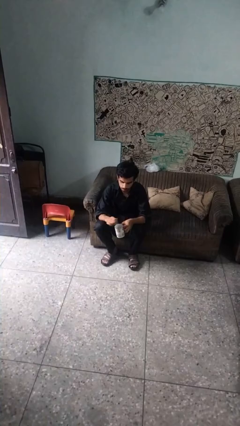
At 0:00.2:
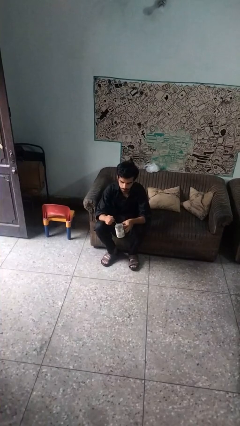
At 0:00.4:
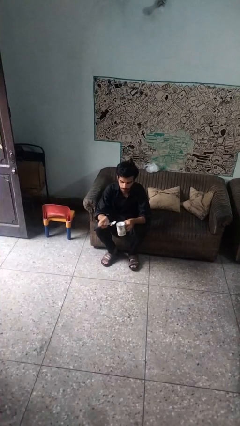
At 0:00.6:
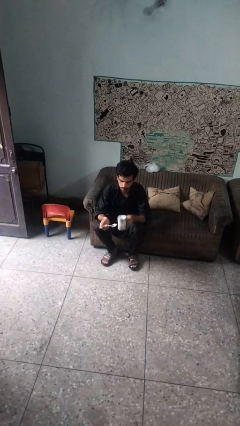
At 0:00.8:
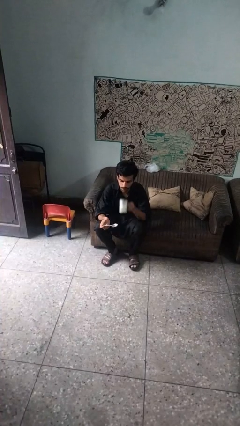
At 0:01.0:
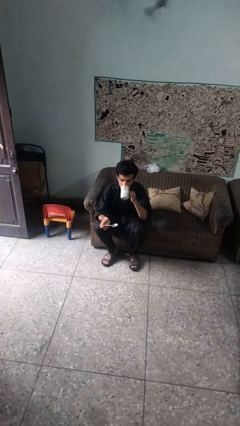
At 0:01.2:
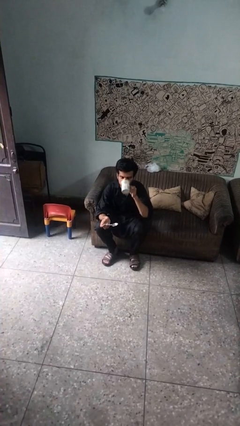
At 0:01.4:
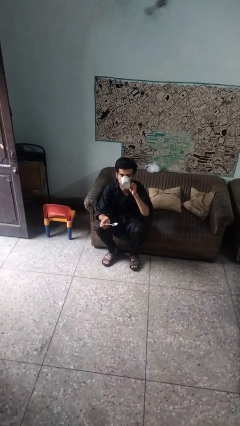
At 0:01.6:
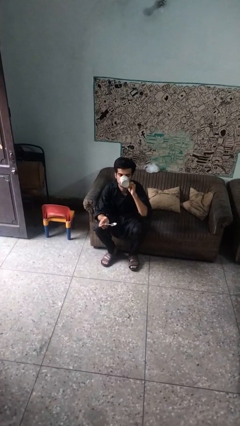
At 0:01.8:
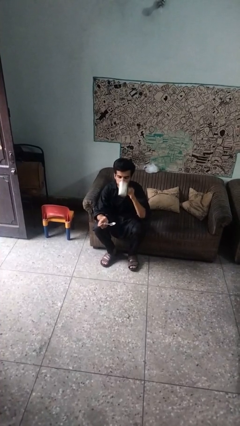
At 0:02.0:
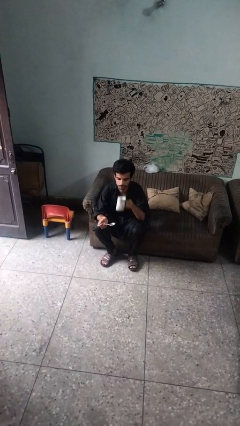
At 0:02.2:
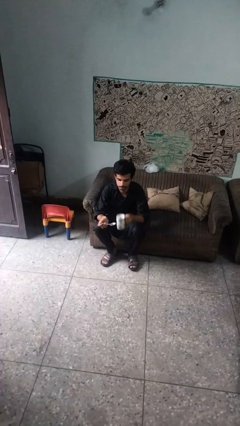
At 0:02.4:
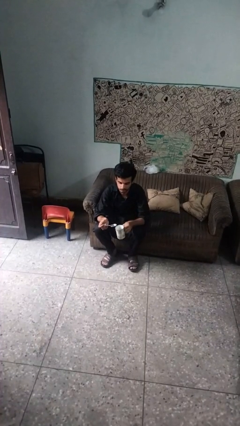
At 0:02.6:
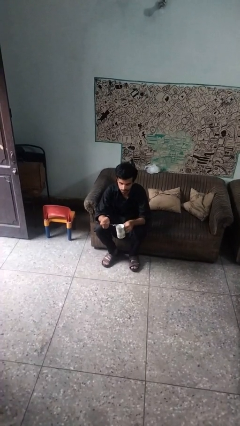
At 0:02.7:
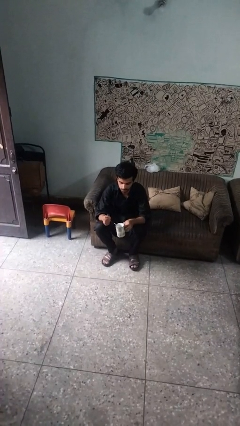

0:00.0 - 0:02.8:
person drinks from mug

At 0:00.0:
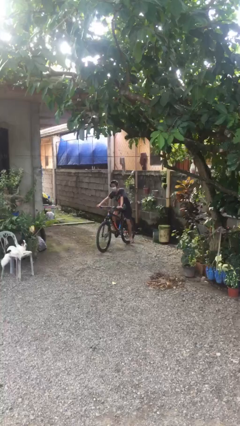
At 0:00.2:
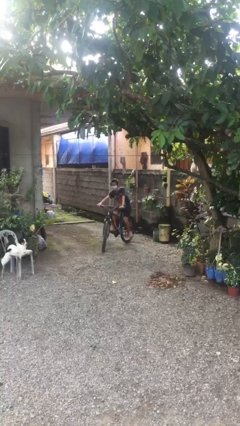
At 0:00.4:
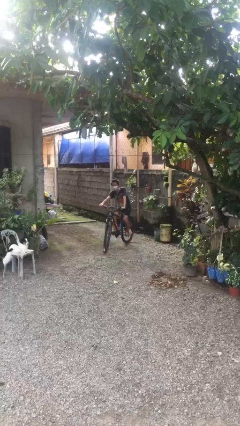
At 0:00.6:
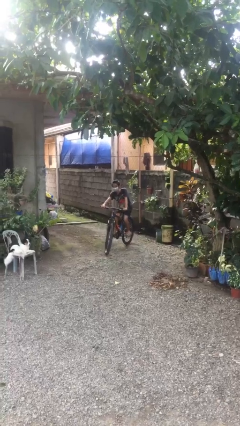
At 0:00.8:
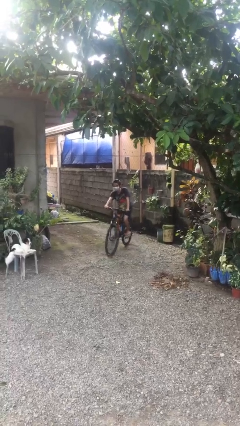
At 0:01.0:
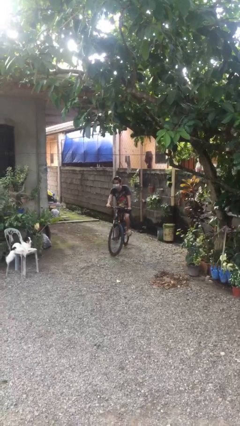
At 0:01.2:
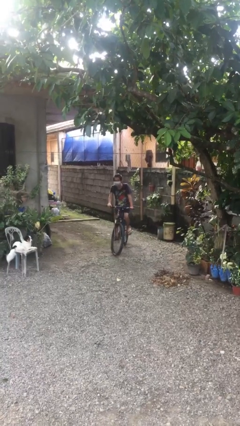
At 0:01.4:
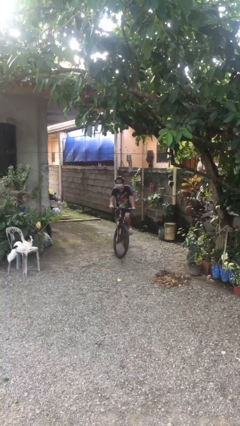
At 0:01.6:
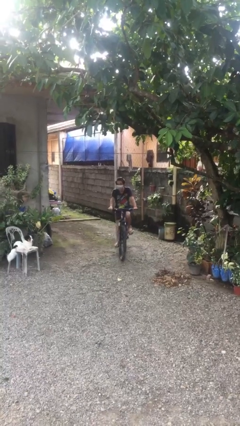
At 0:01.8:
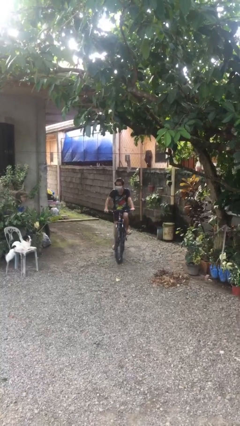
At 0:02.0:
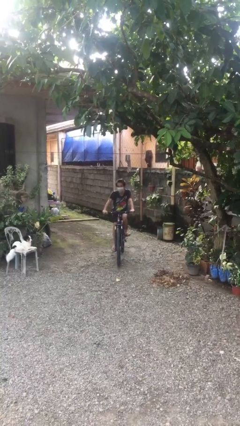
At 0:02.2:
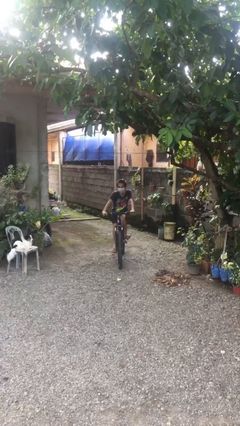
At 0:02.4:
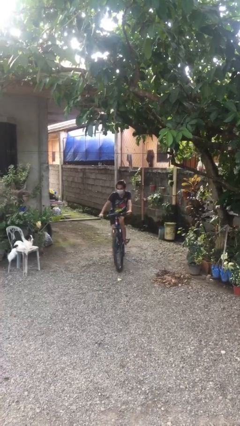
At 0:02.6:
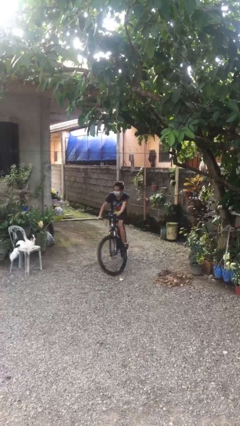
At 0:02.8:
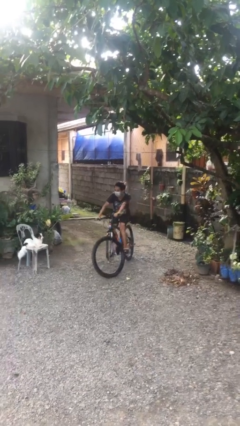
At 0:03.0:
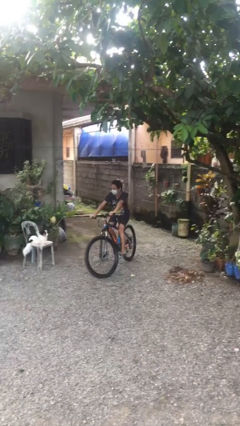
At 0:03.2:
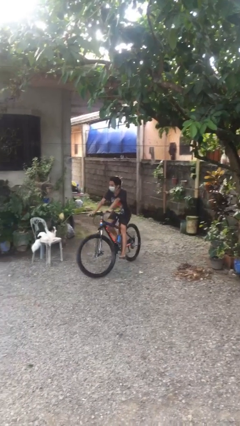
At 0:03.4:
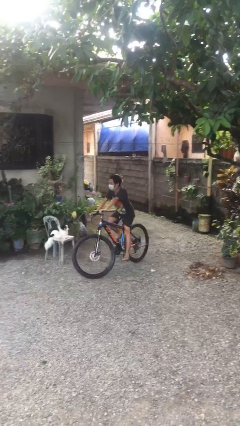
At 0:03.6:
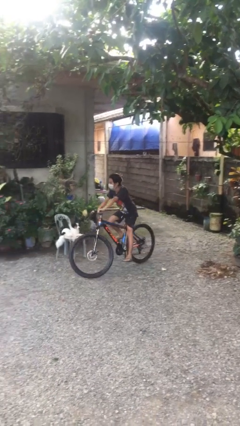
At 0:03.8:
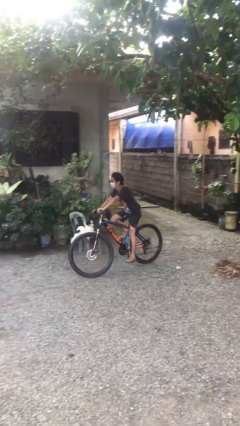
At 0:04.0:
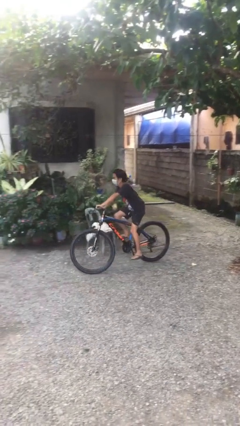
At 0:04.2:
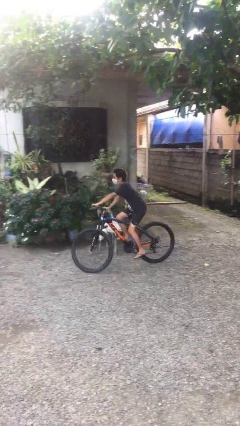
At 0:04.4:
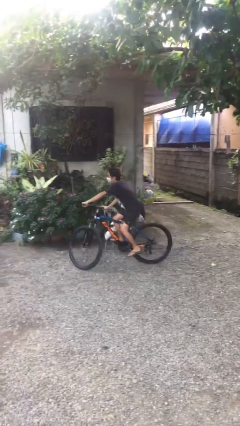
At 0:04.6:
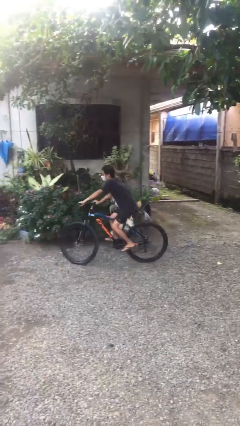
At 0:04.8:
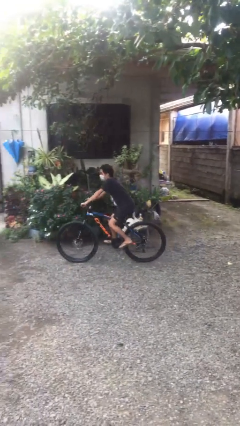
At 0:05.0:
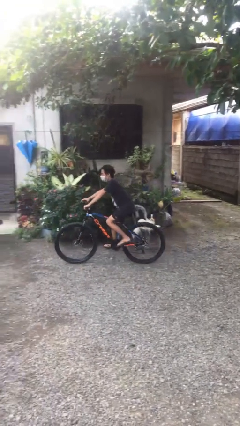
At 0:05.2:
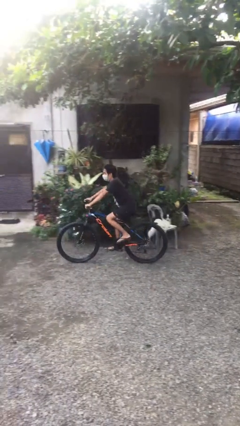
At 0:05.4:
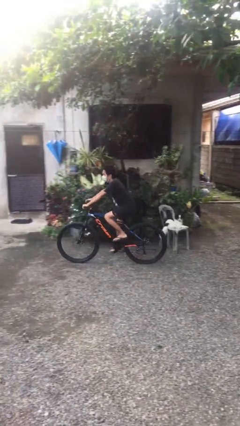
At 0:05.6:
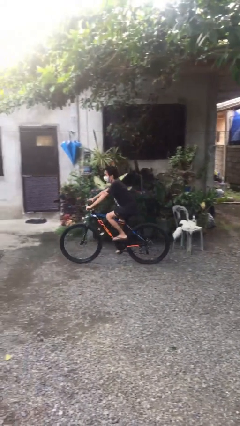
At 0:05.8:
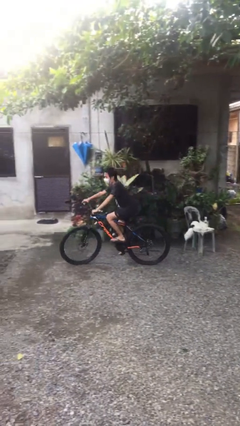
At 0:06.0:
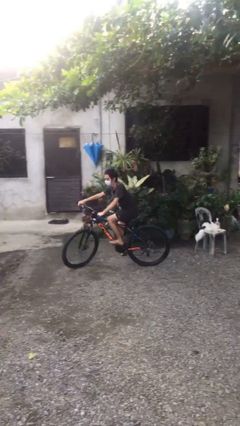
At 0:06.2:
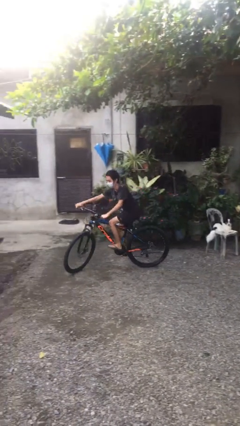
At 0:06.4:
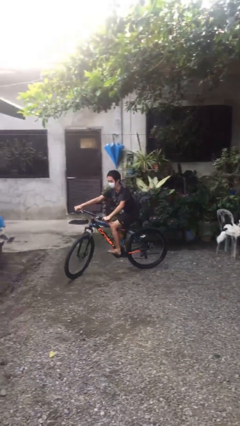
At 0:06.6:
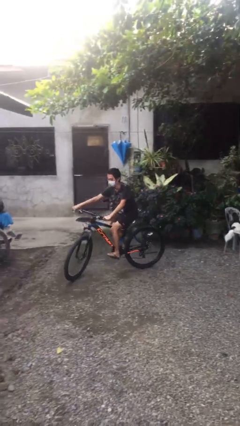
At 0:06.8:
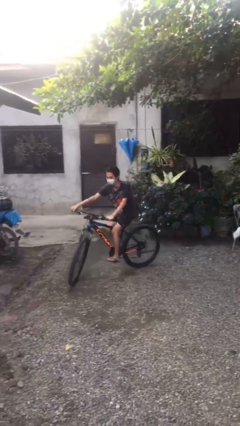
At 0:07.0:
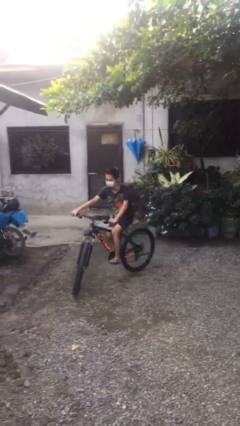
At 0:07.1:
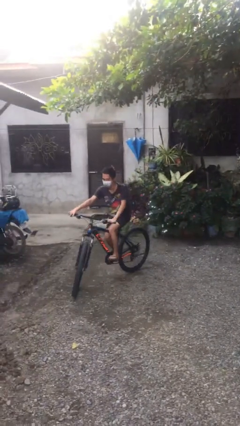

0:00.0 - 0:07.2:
person rides bicycle

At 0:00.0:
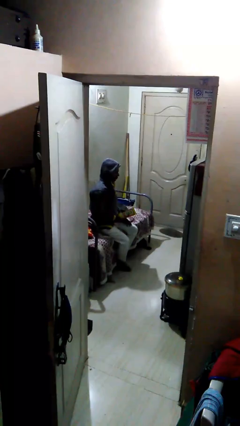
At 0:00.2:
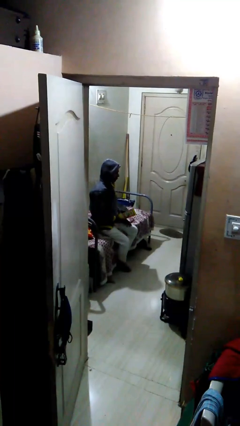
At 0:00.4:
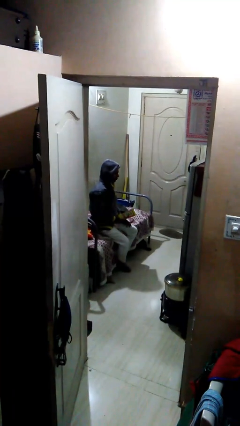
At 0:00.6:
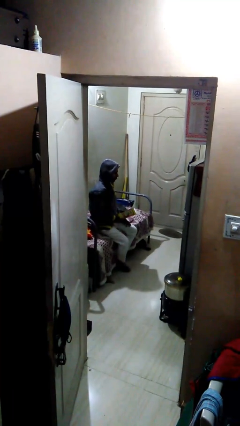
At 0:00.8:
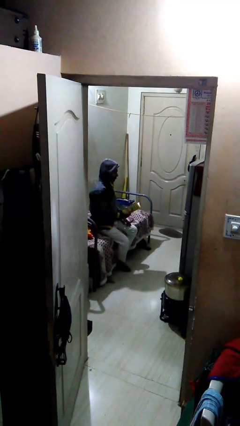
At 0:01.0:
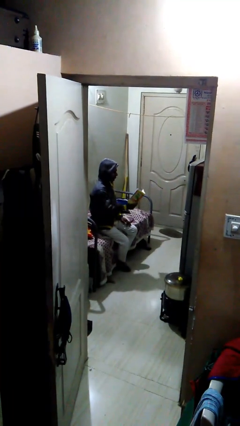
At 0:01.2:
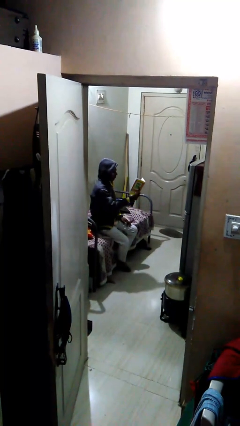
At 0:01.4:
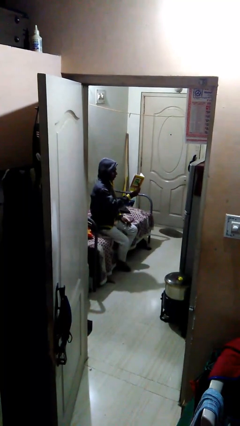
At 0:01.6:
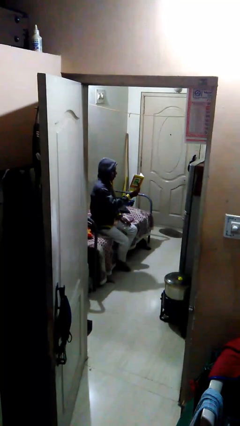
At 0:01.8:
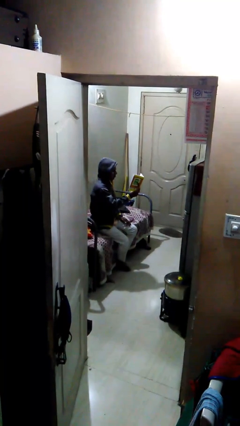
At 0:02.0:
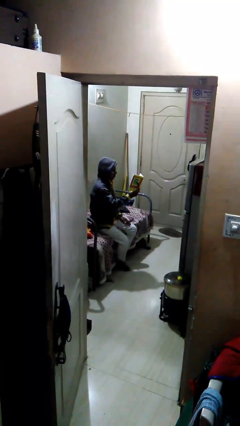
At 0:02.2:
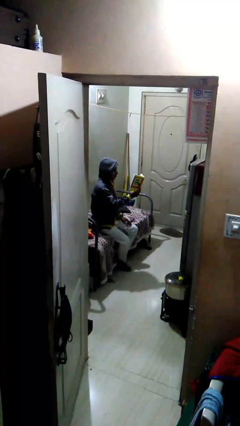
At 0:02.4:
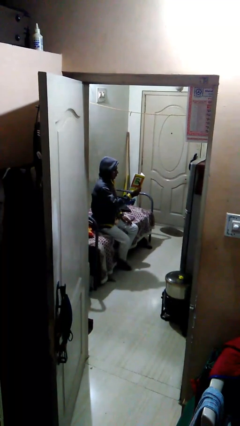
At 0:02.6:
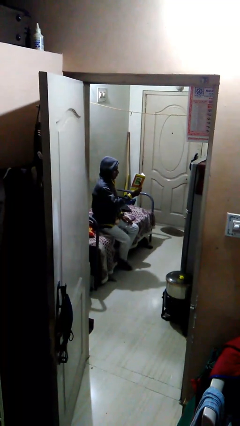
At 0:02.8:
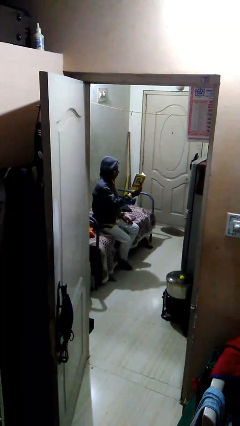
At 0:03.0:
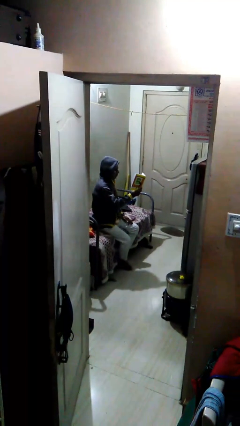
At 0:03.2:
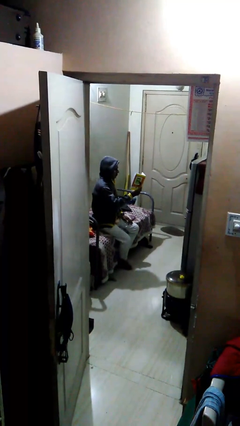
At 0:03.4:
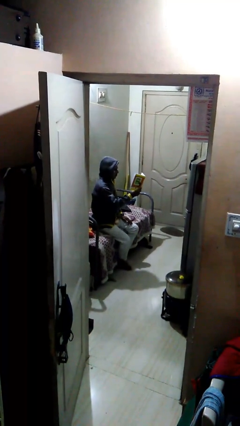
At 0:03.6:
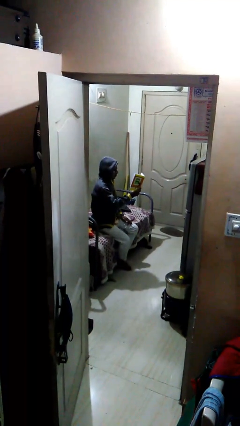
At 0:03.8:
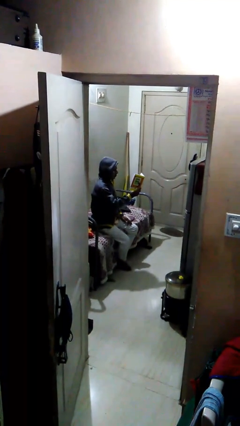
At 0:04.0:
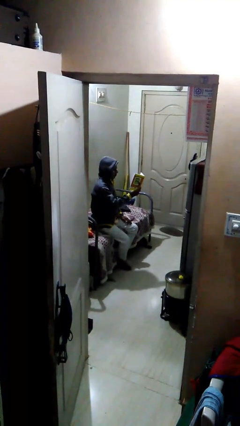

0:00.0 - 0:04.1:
person reads document

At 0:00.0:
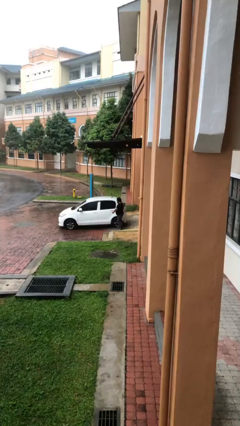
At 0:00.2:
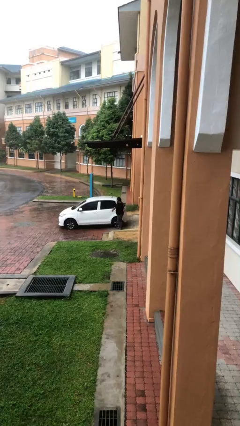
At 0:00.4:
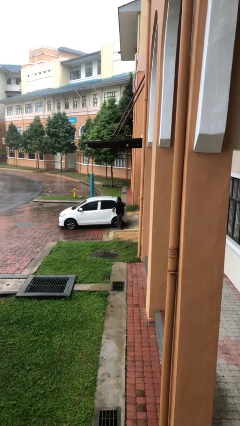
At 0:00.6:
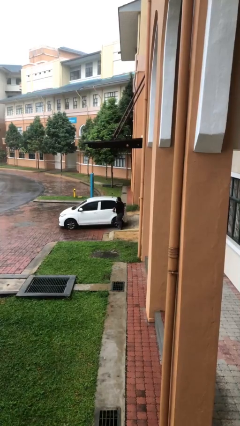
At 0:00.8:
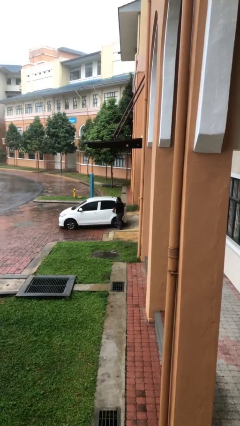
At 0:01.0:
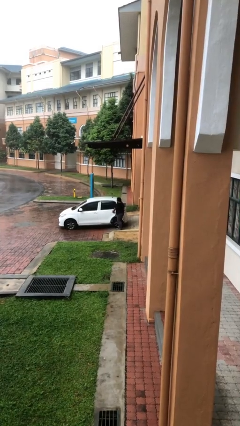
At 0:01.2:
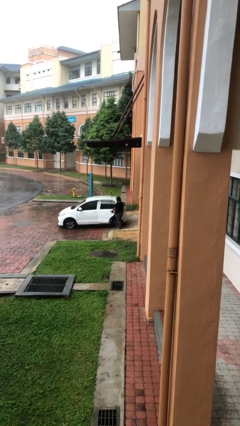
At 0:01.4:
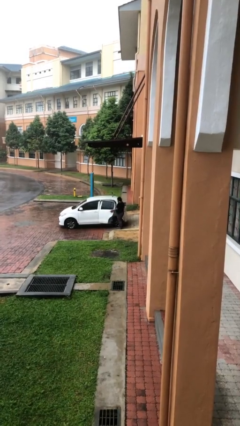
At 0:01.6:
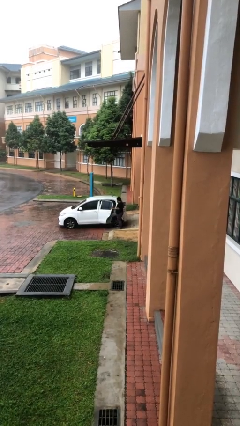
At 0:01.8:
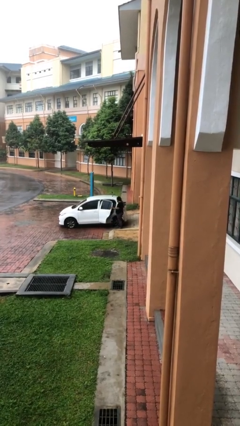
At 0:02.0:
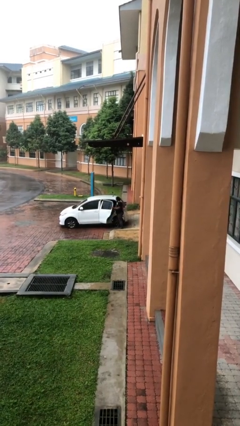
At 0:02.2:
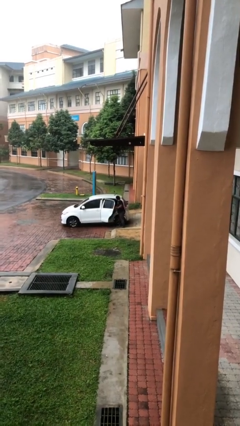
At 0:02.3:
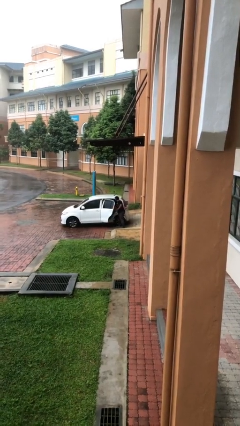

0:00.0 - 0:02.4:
person opens car door

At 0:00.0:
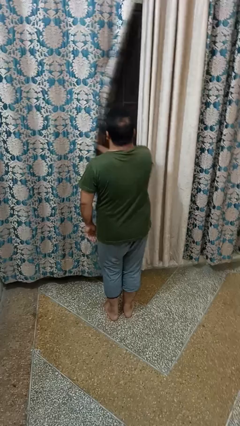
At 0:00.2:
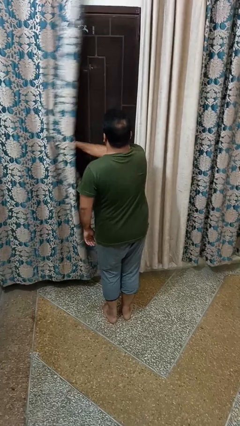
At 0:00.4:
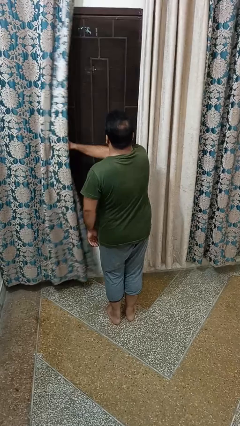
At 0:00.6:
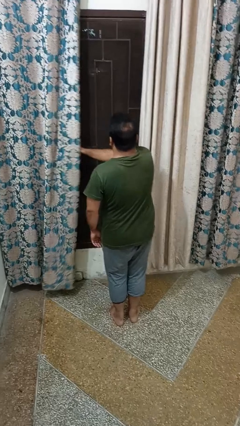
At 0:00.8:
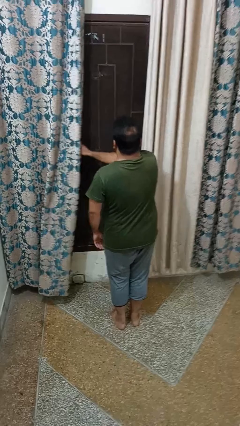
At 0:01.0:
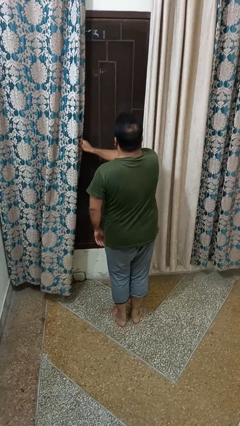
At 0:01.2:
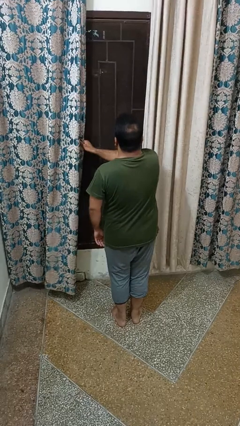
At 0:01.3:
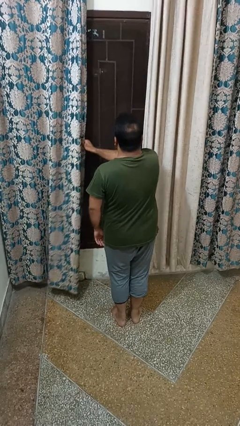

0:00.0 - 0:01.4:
person opens curtains
